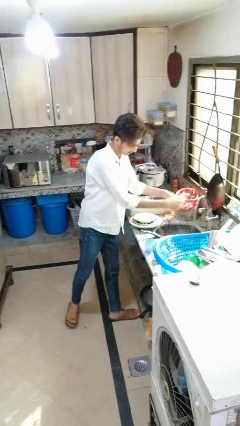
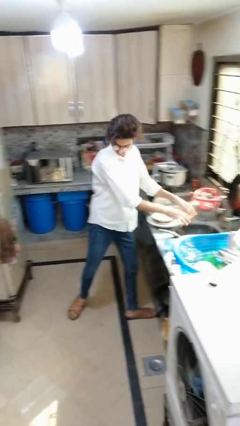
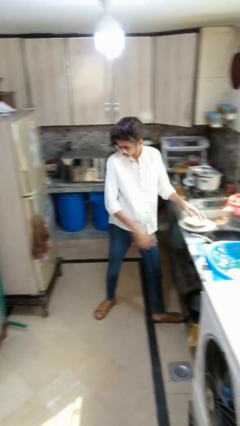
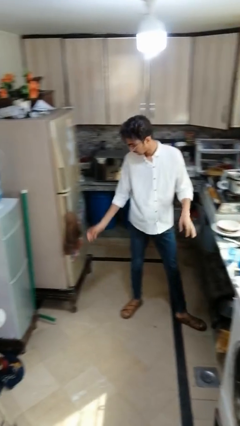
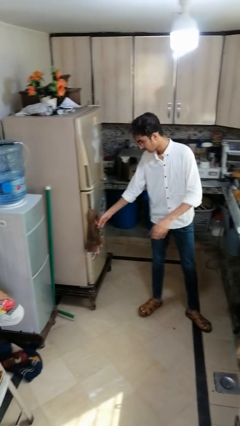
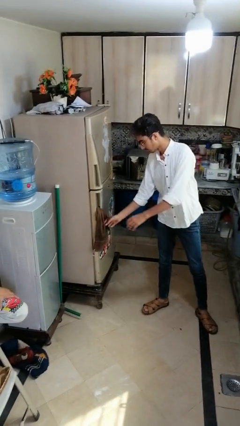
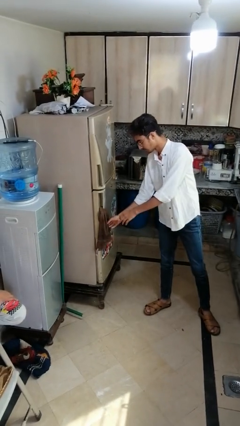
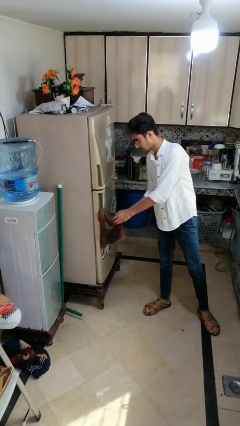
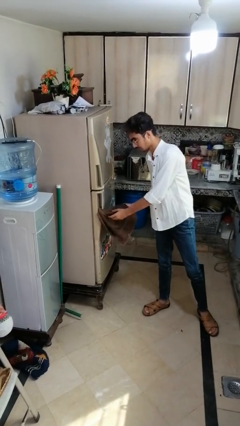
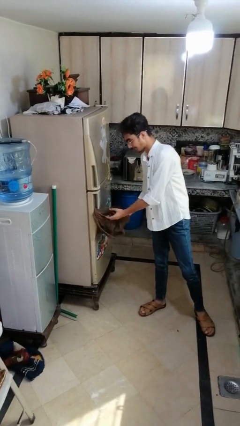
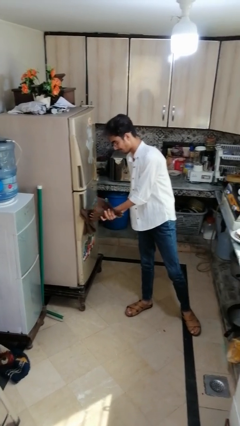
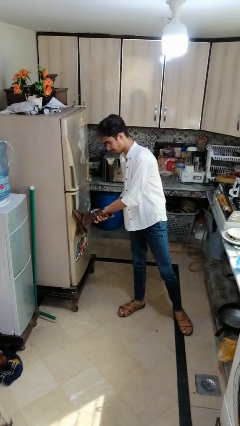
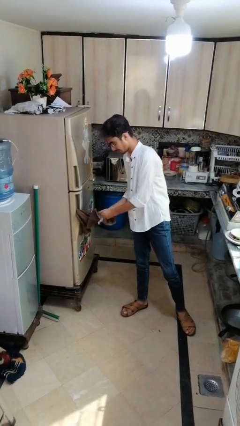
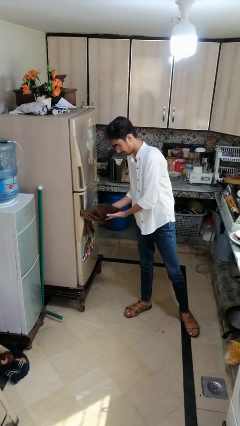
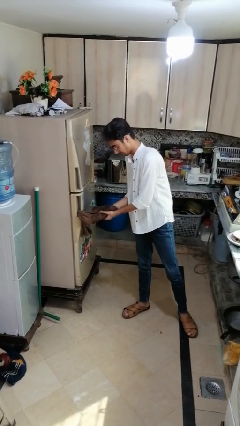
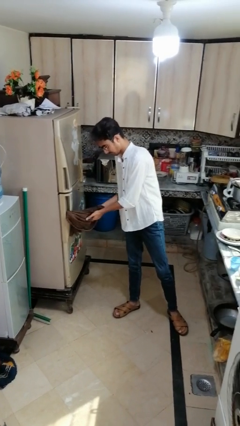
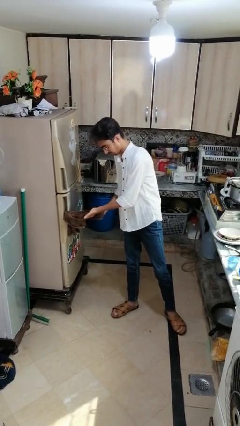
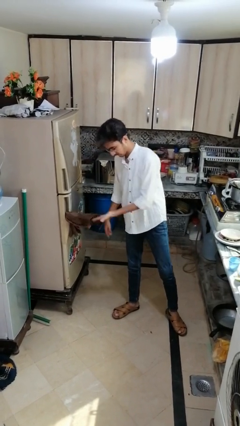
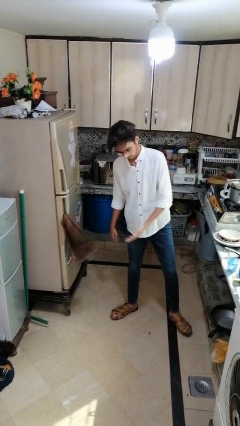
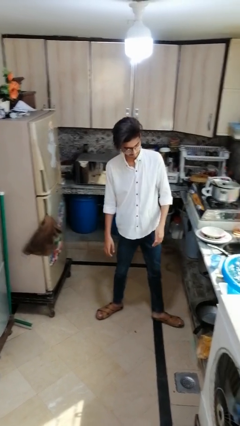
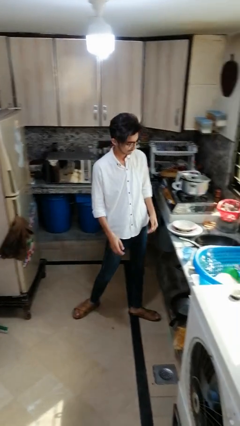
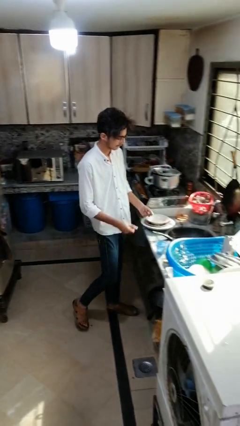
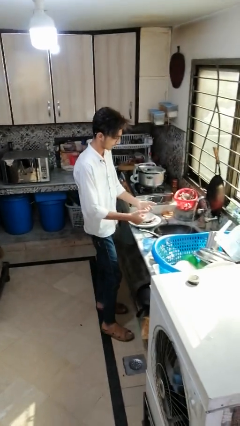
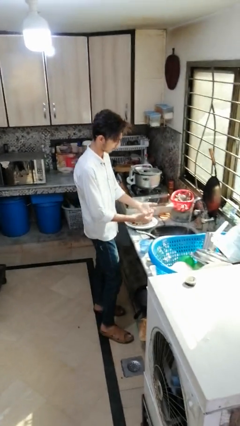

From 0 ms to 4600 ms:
person dries hands with towel

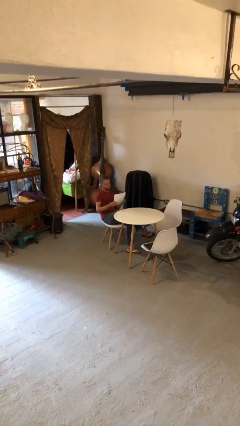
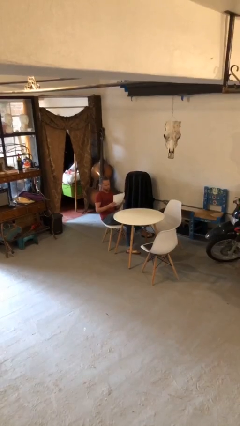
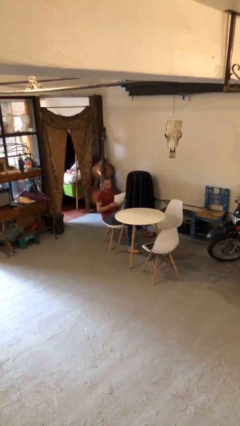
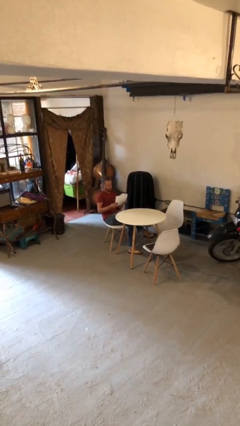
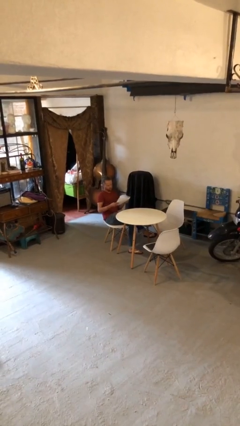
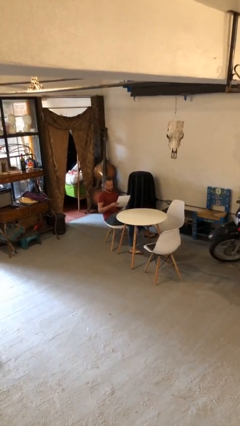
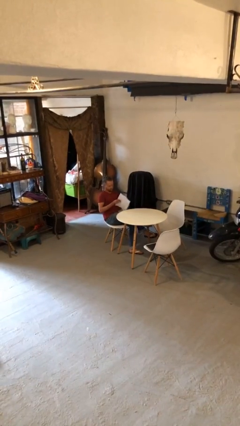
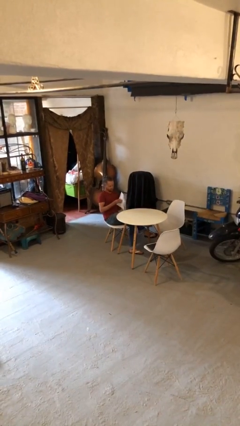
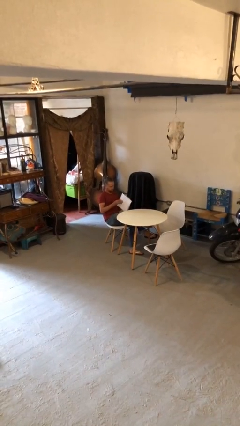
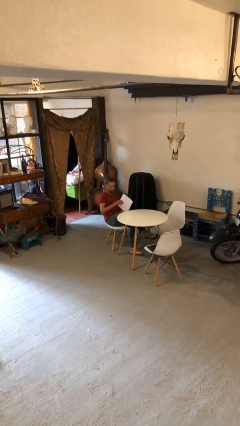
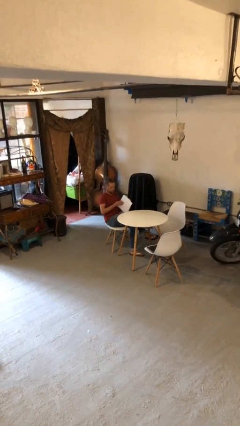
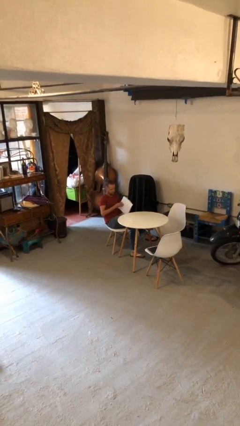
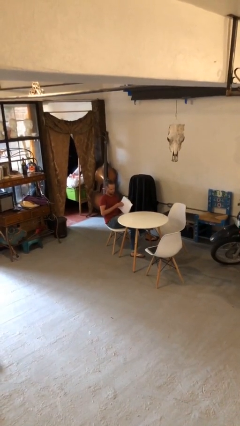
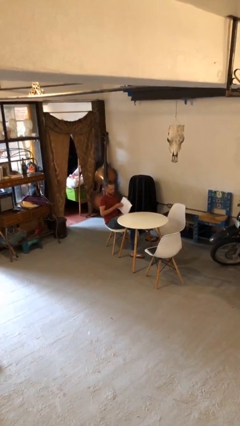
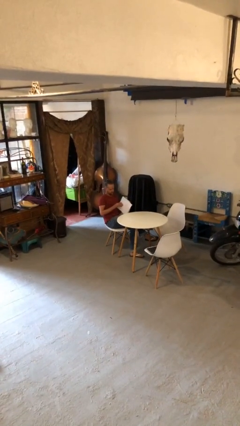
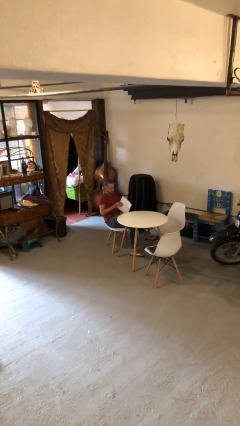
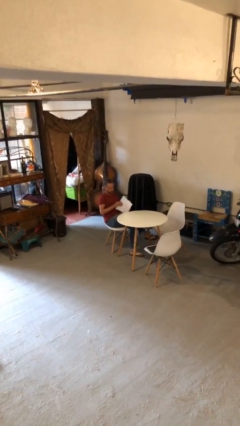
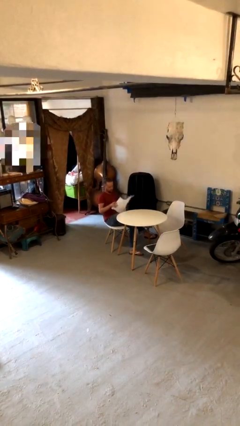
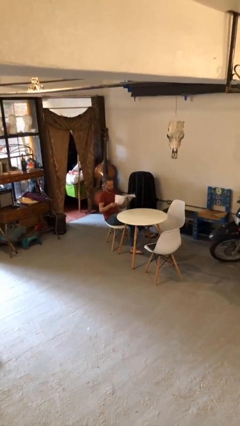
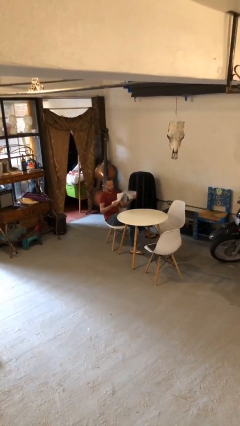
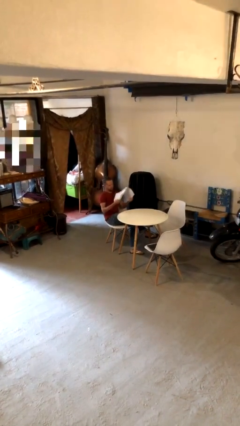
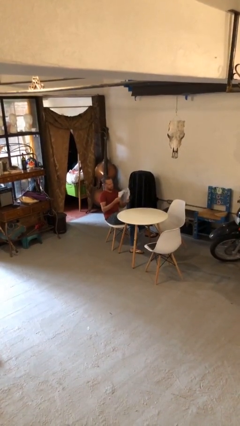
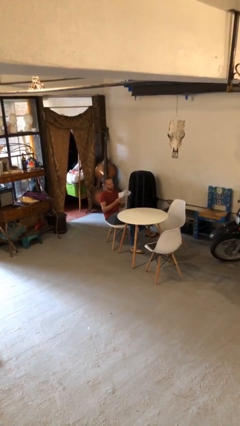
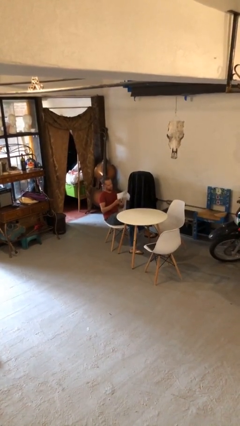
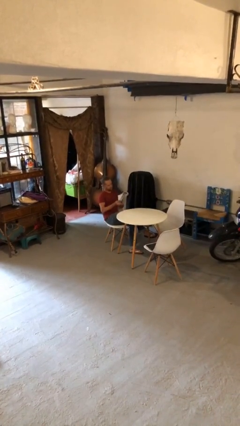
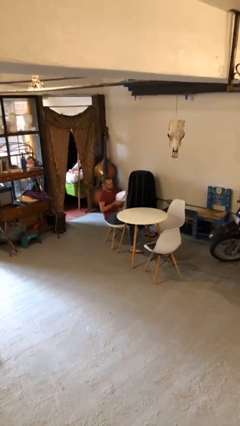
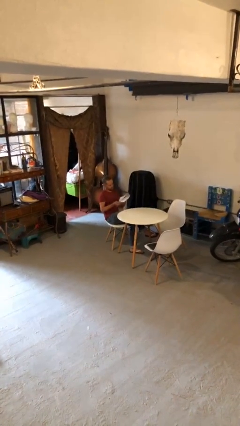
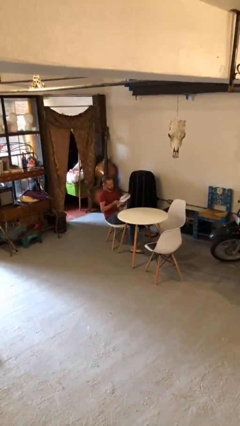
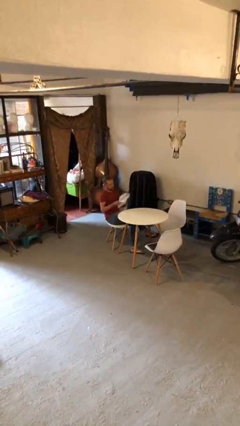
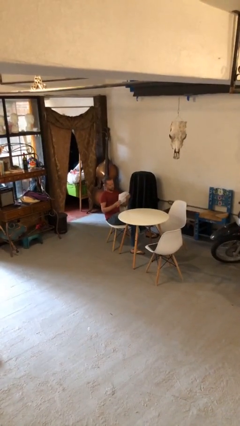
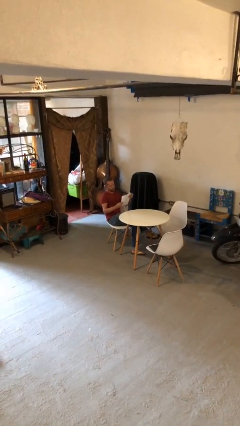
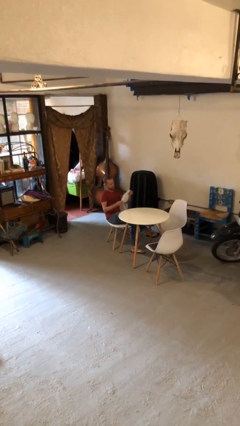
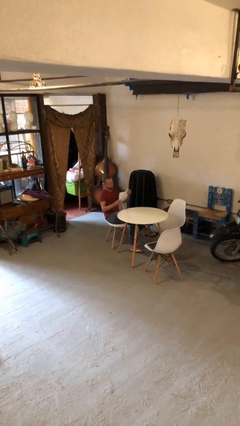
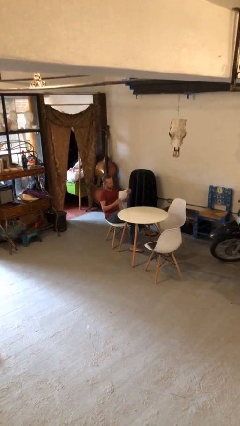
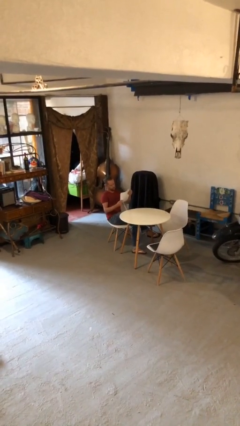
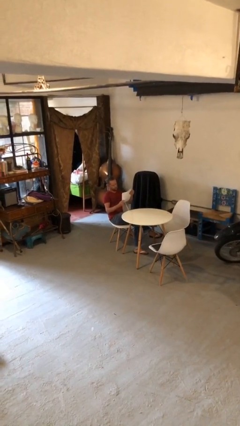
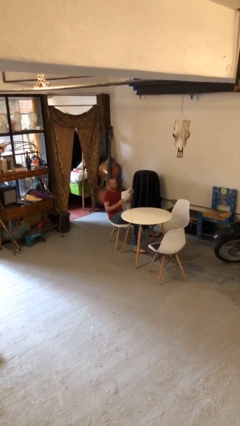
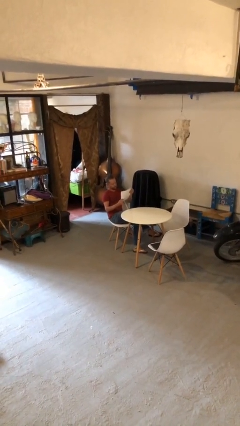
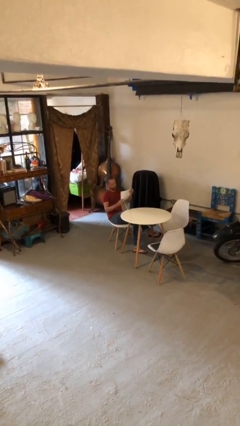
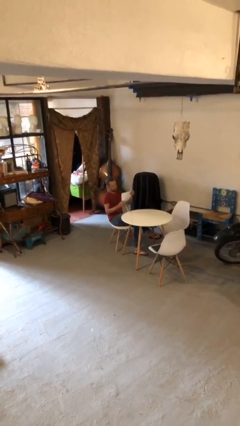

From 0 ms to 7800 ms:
person reads document

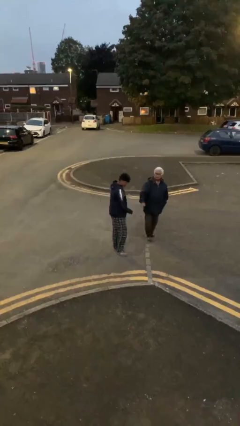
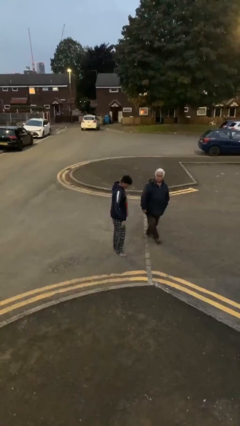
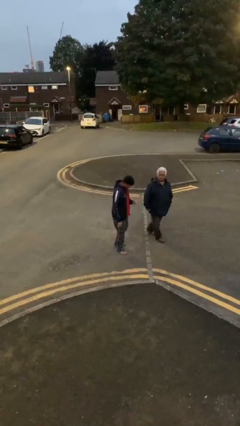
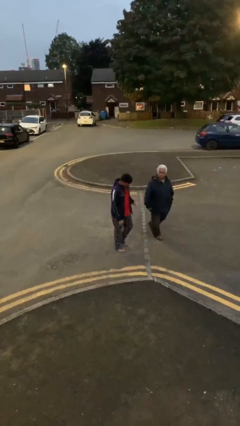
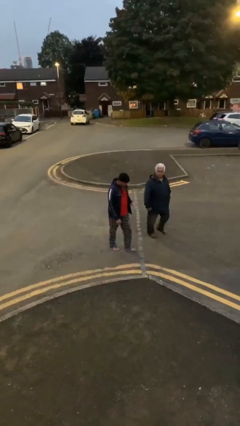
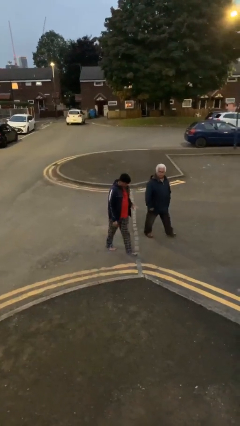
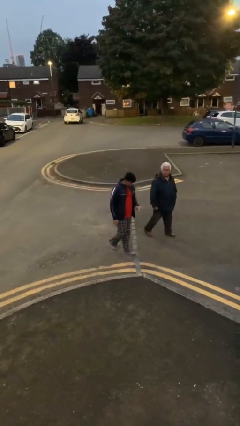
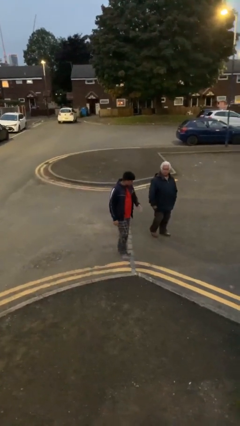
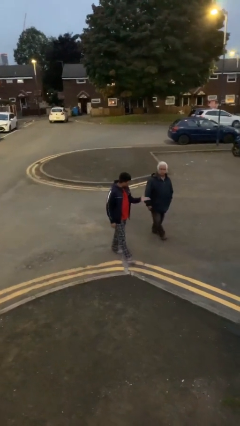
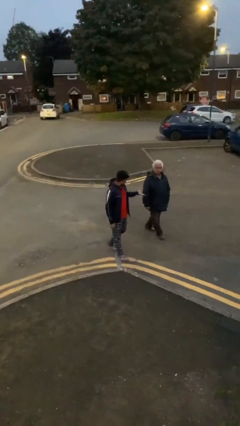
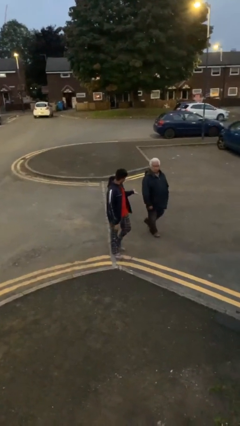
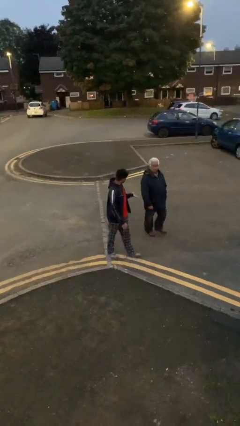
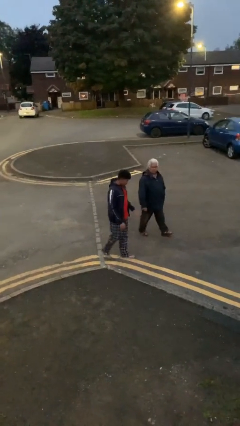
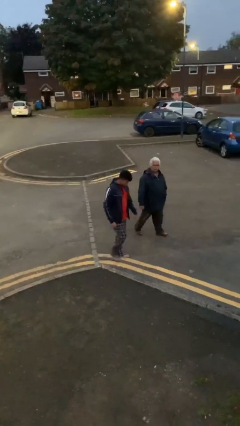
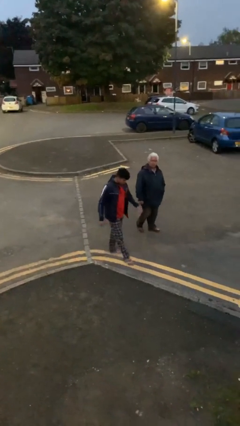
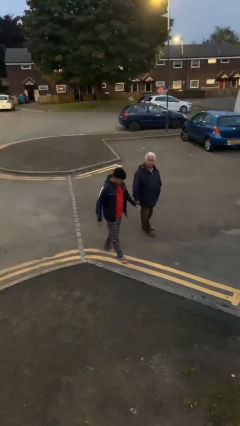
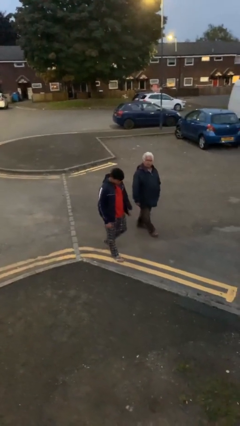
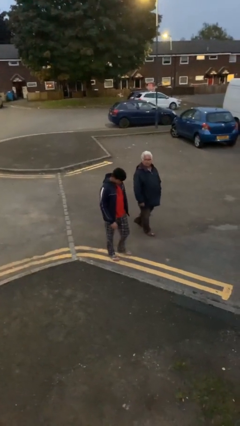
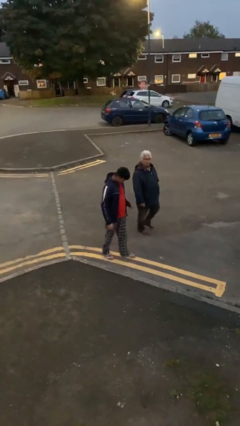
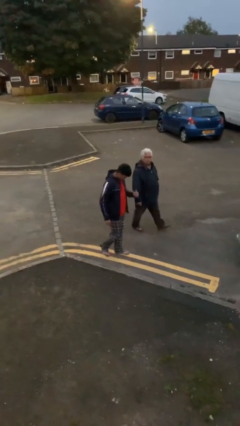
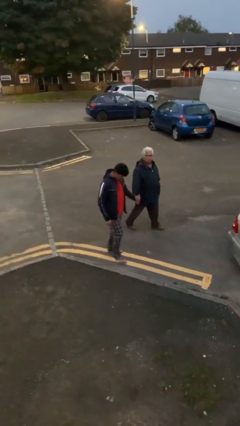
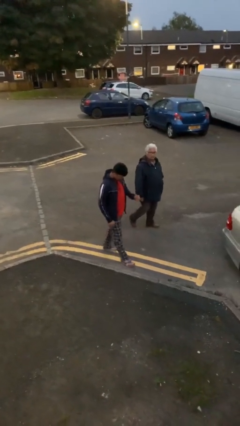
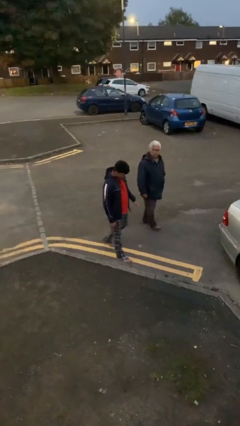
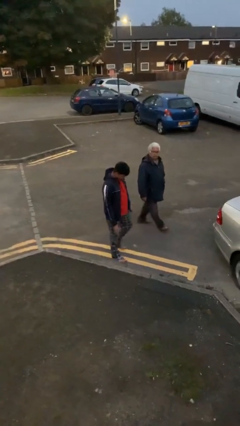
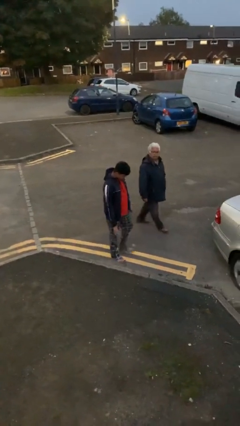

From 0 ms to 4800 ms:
person talks to person

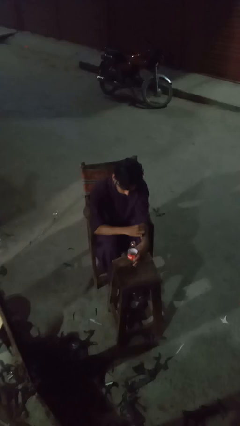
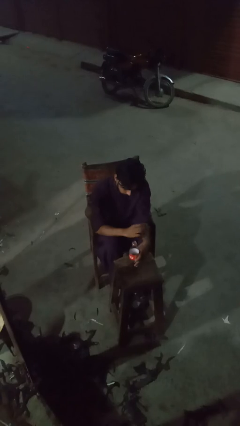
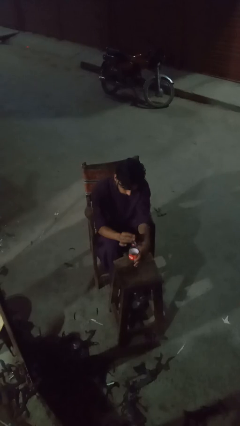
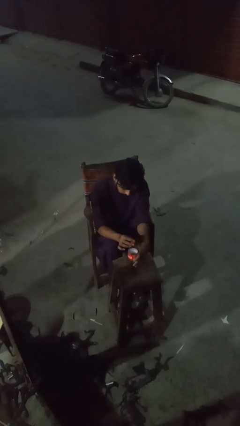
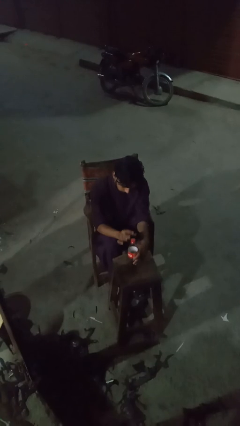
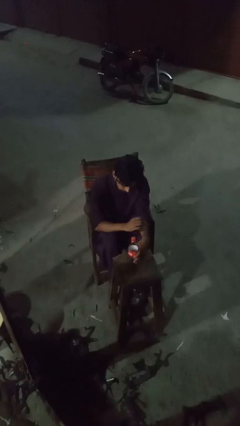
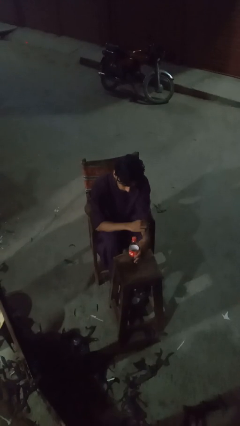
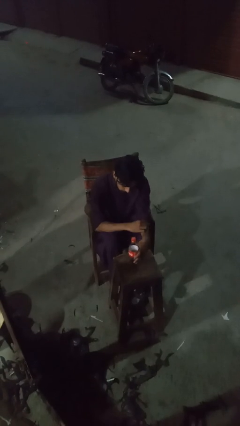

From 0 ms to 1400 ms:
person screws lid to bottle
